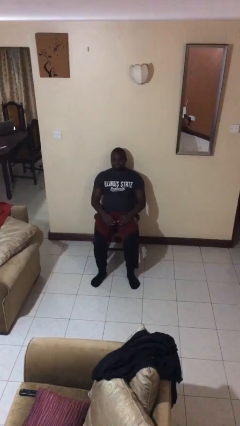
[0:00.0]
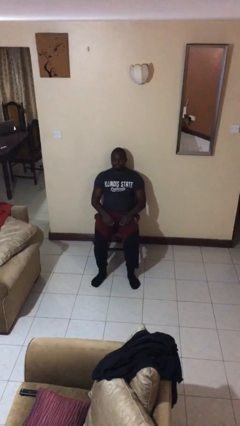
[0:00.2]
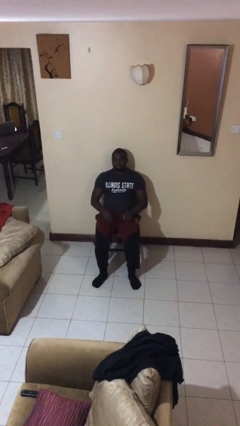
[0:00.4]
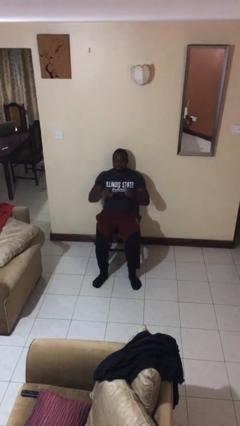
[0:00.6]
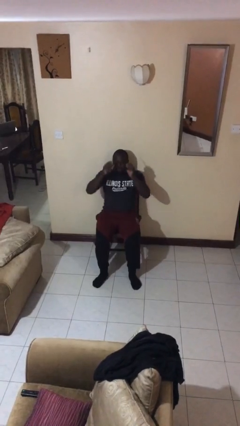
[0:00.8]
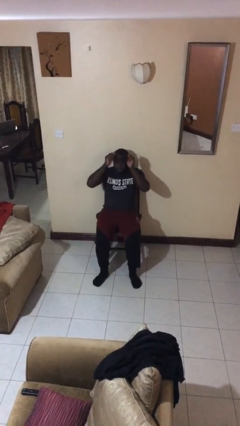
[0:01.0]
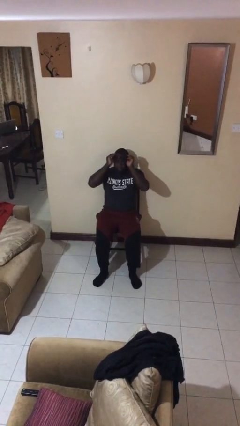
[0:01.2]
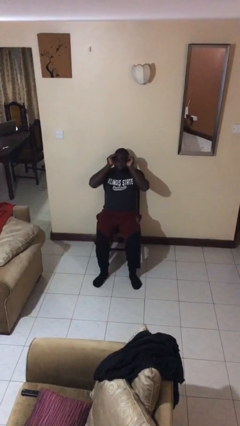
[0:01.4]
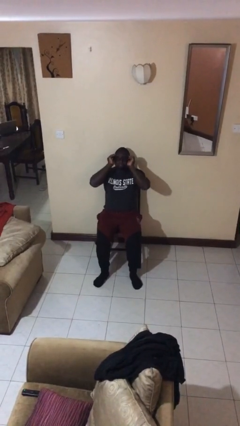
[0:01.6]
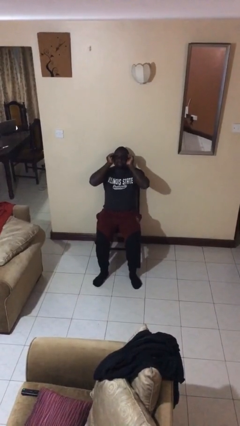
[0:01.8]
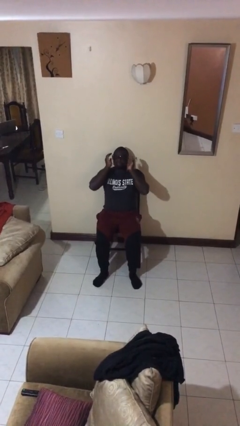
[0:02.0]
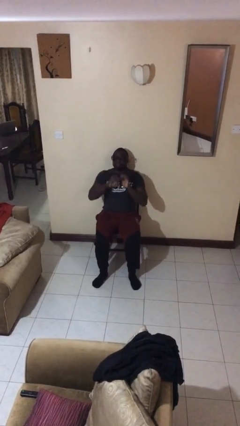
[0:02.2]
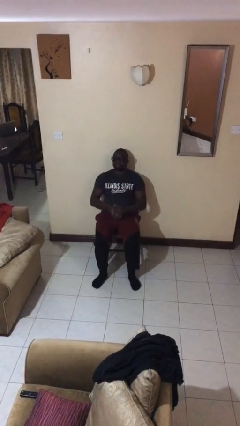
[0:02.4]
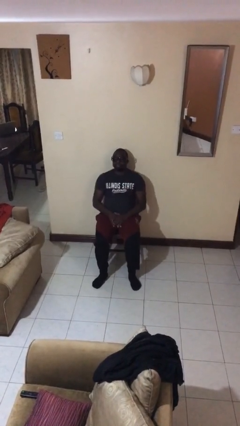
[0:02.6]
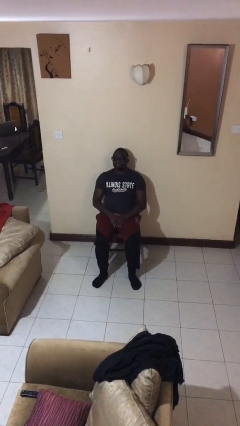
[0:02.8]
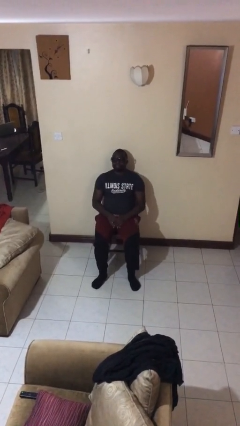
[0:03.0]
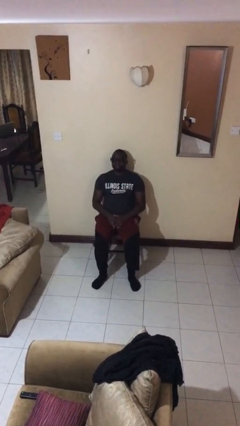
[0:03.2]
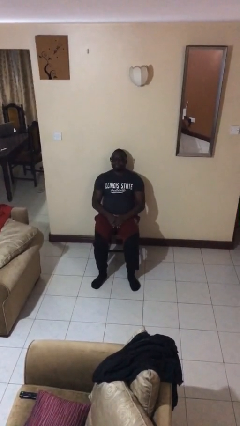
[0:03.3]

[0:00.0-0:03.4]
person puts on glasses

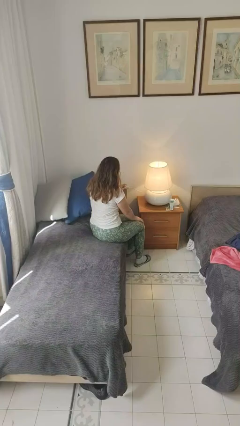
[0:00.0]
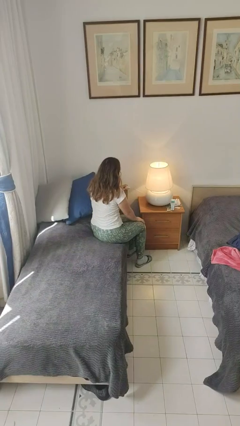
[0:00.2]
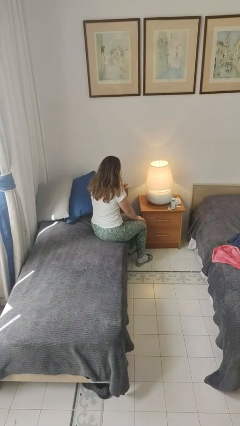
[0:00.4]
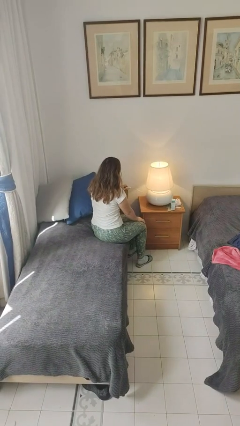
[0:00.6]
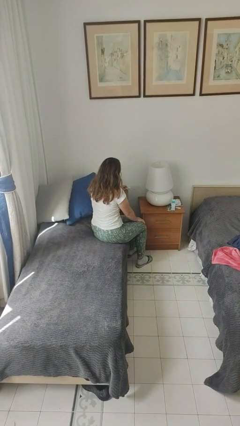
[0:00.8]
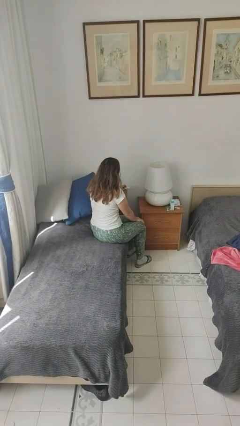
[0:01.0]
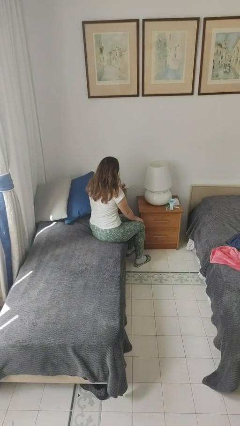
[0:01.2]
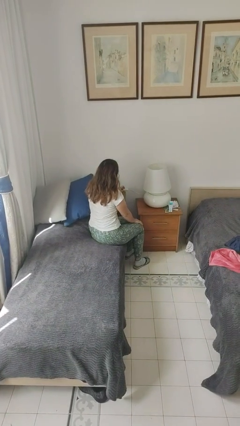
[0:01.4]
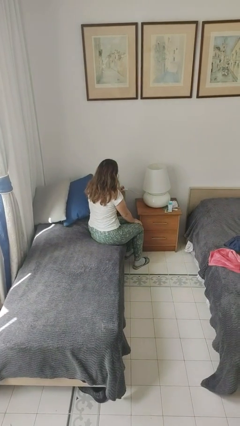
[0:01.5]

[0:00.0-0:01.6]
person turns off lamp

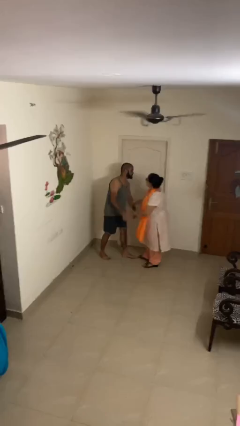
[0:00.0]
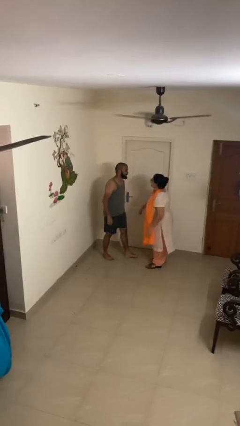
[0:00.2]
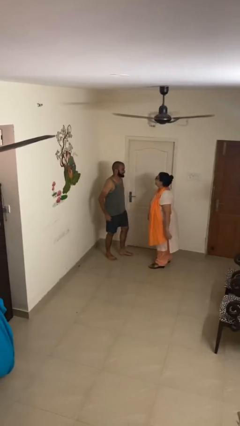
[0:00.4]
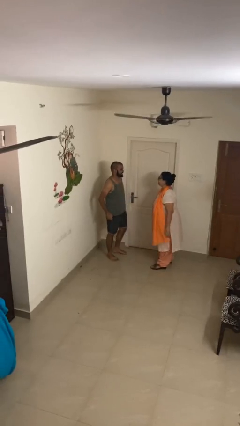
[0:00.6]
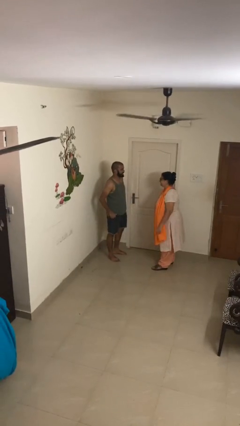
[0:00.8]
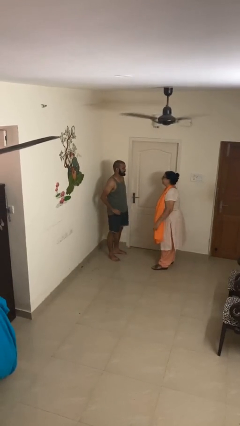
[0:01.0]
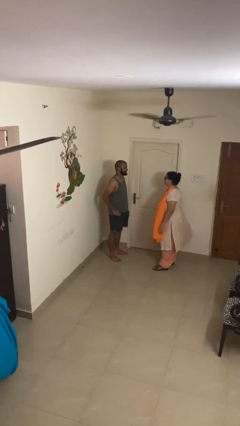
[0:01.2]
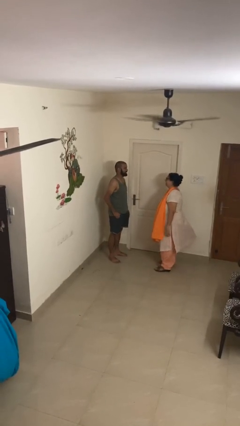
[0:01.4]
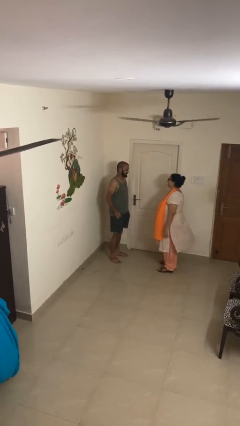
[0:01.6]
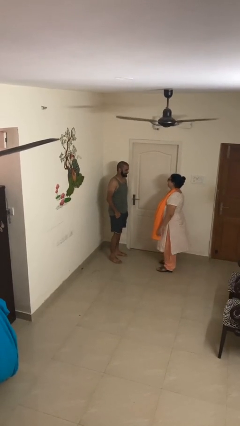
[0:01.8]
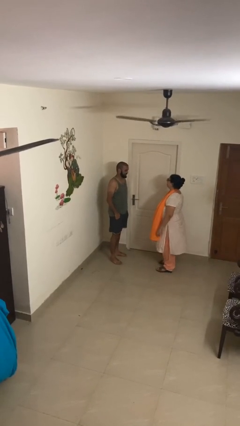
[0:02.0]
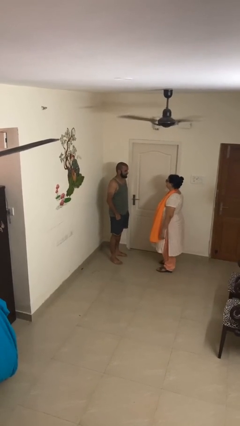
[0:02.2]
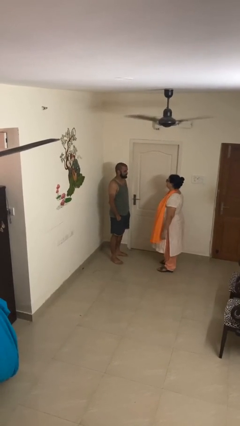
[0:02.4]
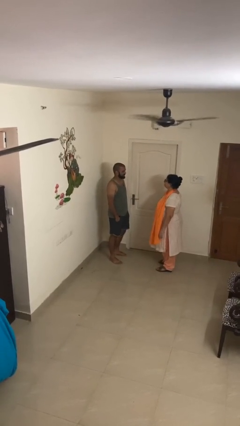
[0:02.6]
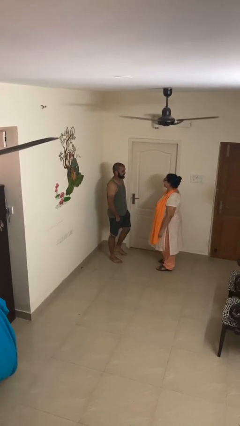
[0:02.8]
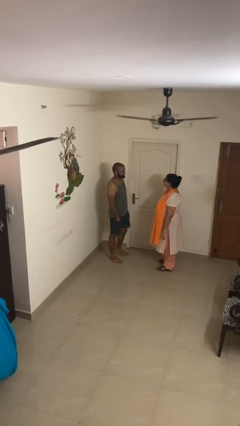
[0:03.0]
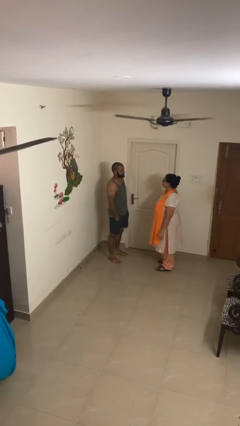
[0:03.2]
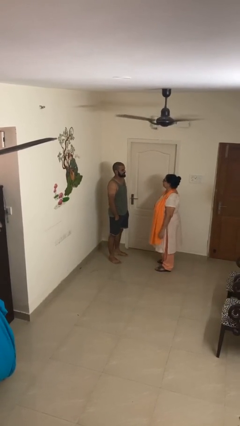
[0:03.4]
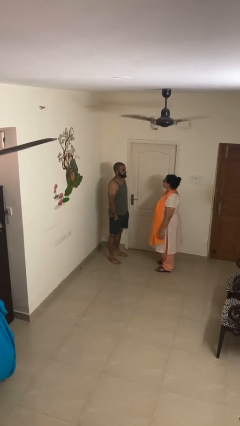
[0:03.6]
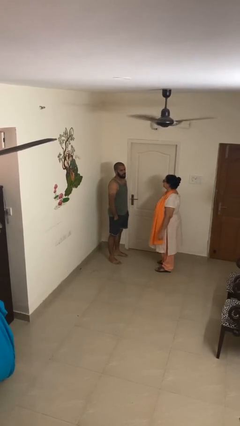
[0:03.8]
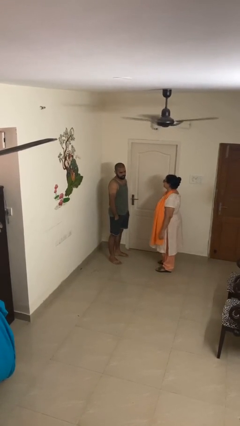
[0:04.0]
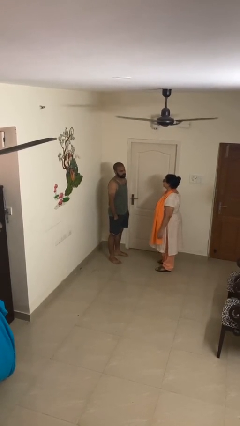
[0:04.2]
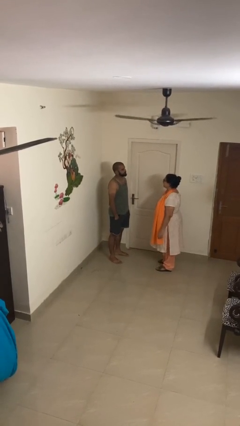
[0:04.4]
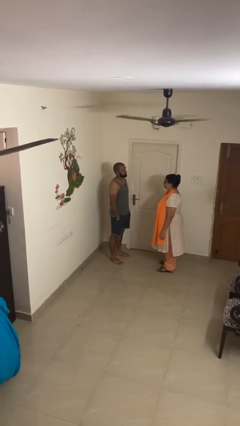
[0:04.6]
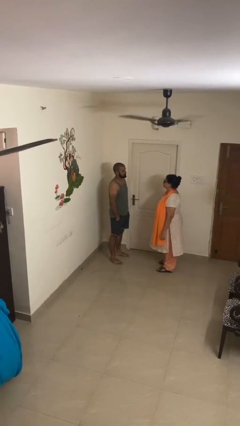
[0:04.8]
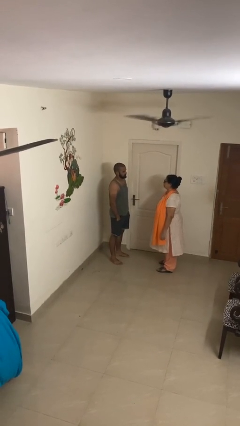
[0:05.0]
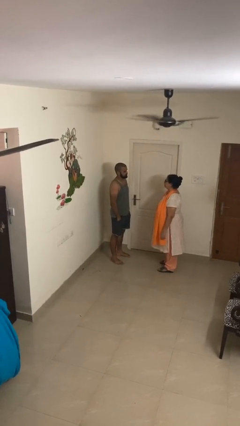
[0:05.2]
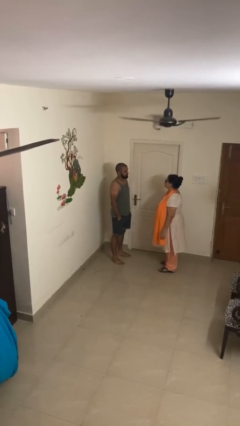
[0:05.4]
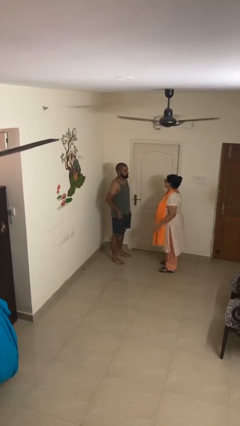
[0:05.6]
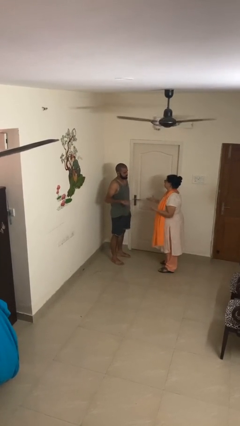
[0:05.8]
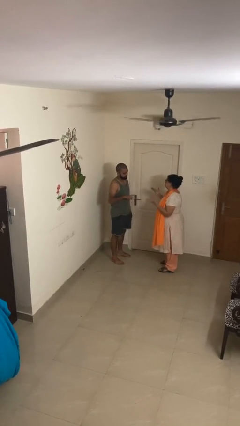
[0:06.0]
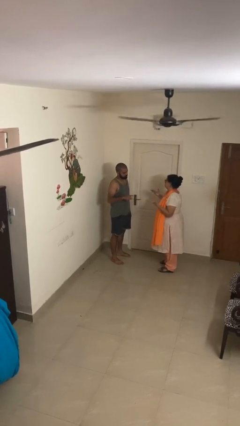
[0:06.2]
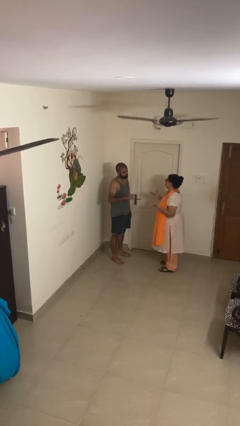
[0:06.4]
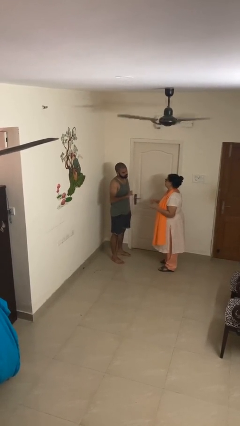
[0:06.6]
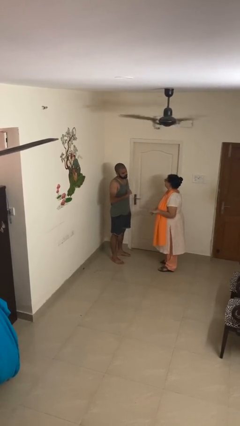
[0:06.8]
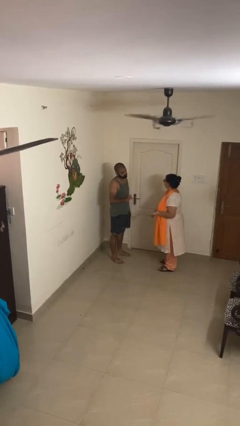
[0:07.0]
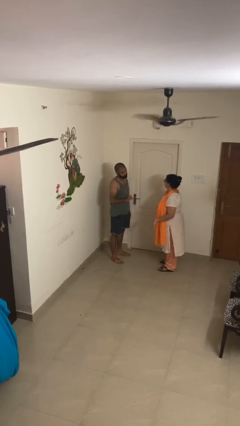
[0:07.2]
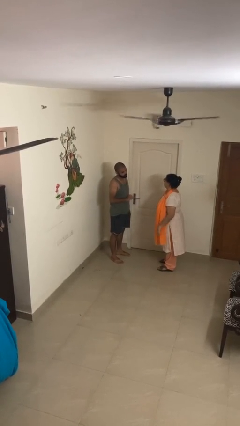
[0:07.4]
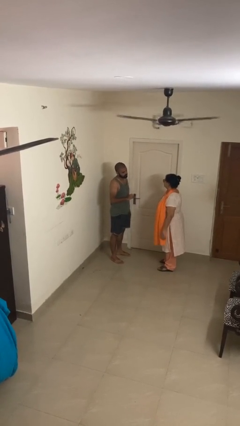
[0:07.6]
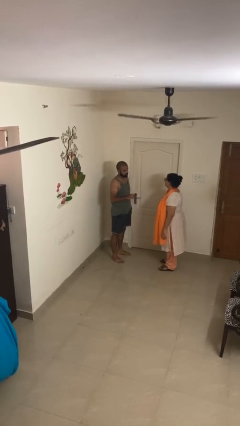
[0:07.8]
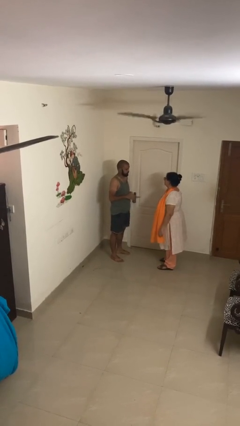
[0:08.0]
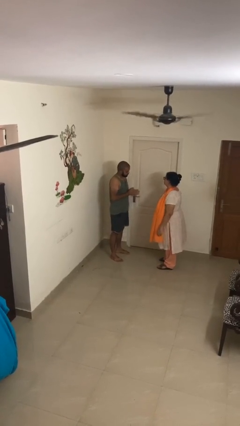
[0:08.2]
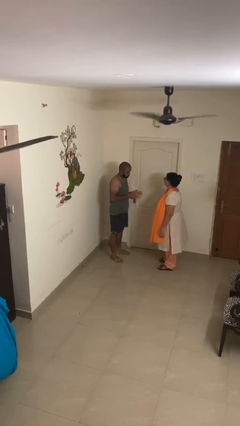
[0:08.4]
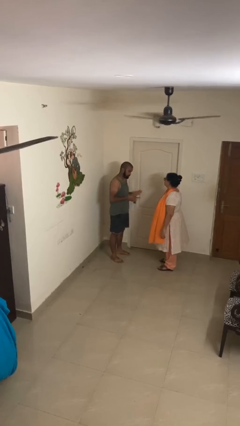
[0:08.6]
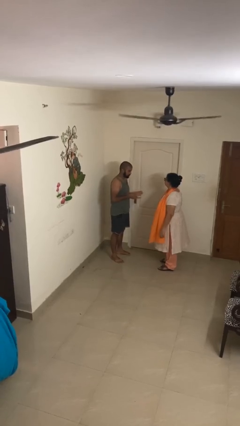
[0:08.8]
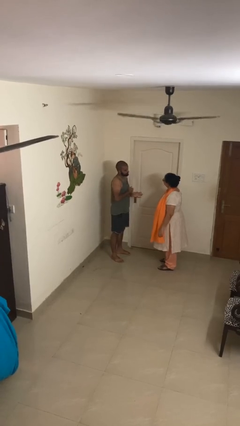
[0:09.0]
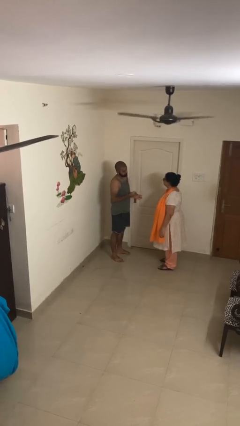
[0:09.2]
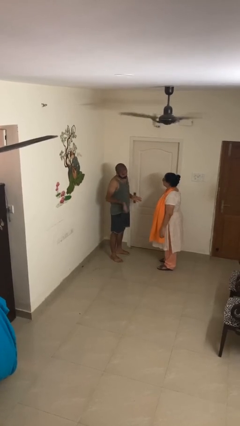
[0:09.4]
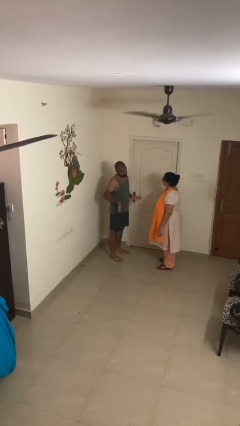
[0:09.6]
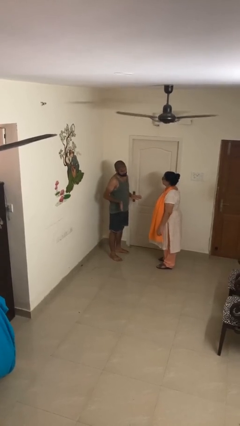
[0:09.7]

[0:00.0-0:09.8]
person talks to person

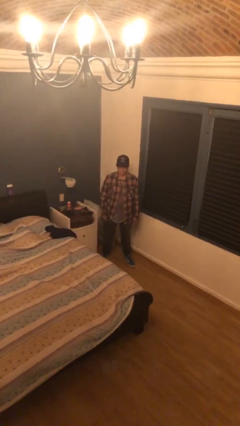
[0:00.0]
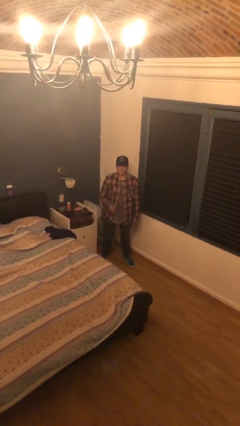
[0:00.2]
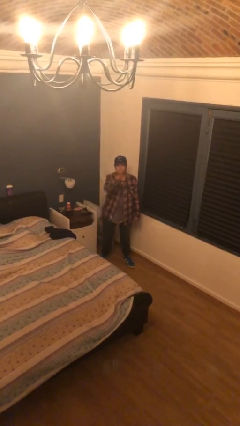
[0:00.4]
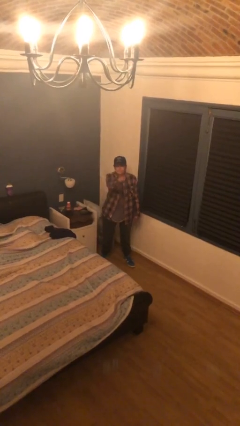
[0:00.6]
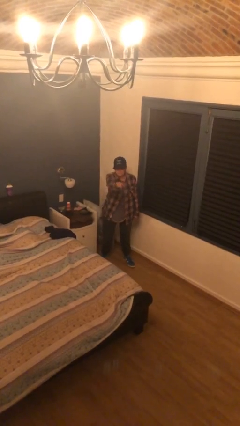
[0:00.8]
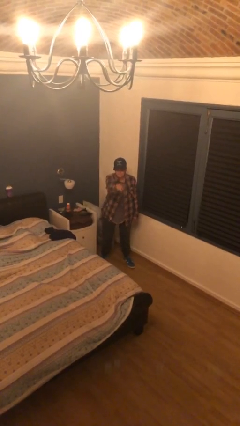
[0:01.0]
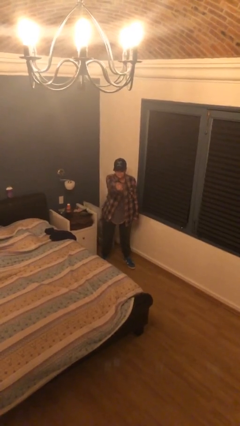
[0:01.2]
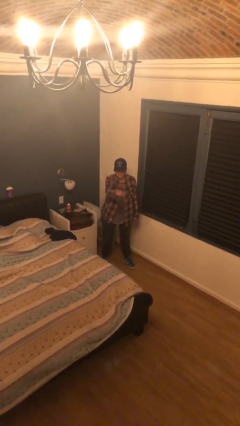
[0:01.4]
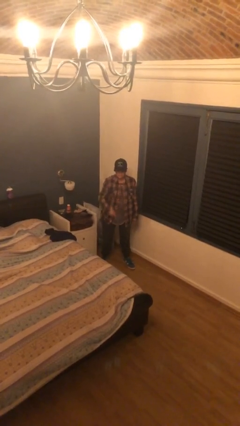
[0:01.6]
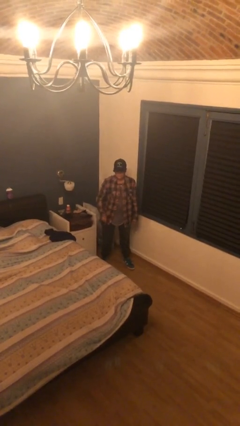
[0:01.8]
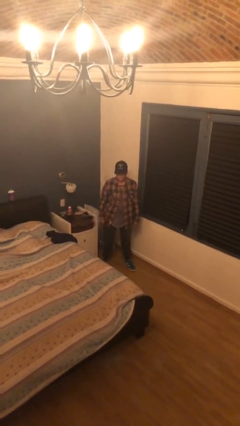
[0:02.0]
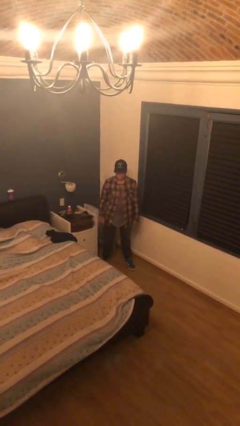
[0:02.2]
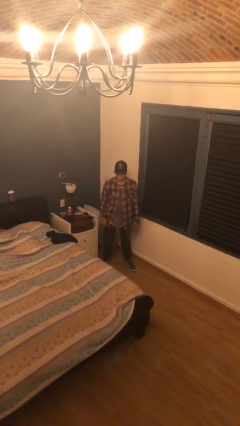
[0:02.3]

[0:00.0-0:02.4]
person points at person

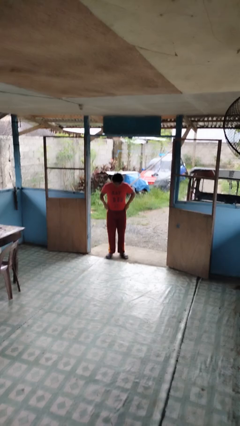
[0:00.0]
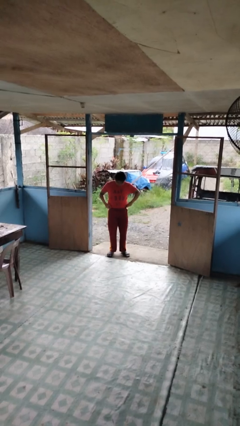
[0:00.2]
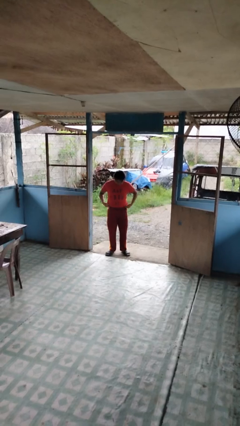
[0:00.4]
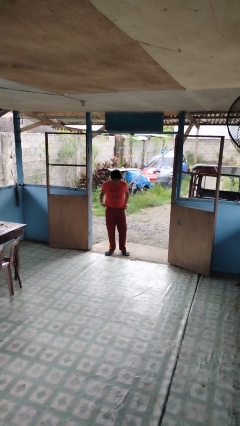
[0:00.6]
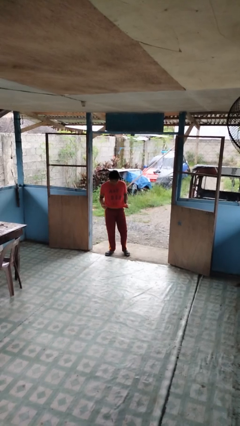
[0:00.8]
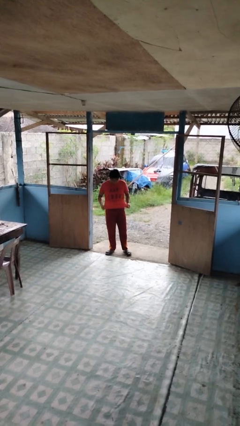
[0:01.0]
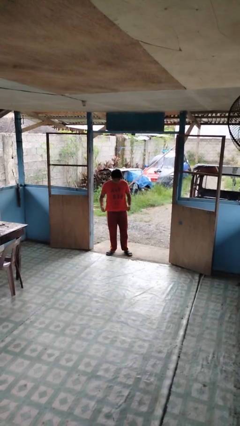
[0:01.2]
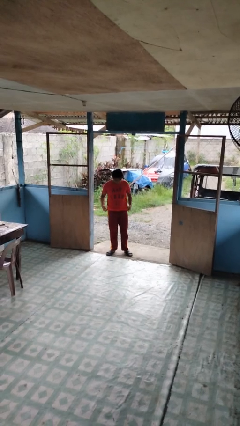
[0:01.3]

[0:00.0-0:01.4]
person untucks shirt
